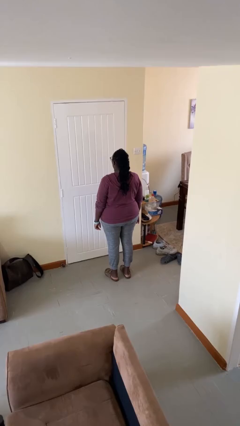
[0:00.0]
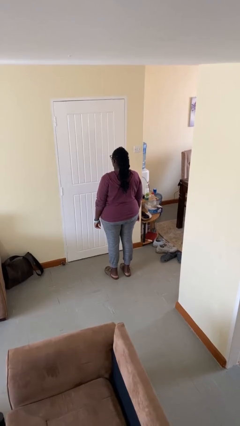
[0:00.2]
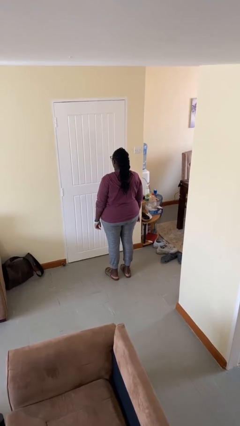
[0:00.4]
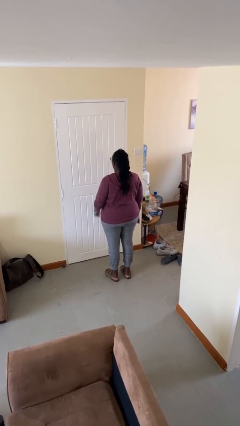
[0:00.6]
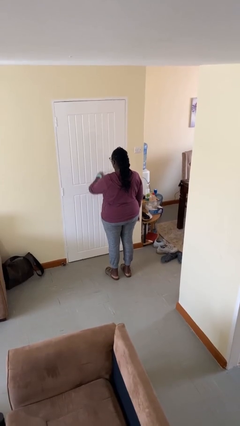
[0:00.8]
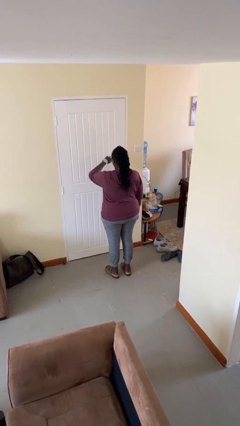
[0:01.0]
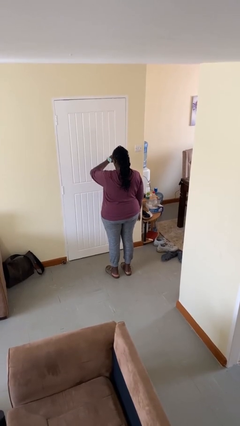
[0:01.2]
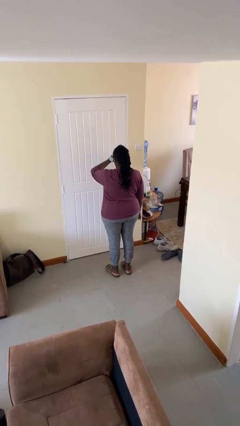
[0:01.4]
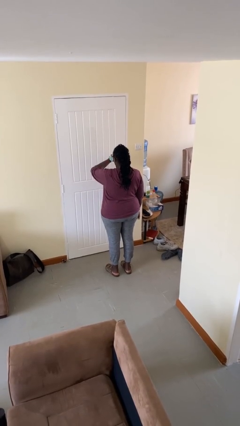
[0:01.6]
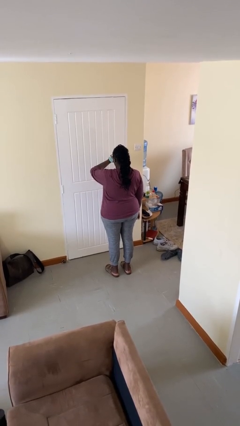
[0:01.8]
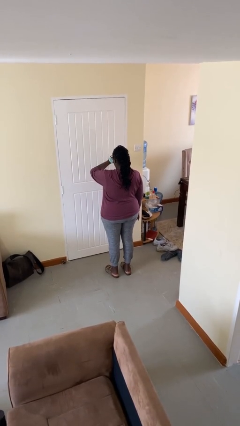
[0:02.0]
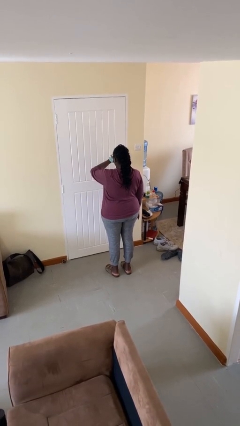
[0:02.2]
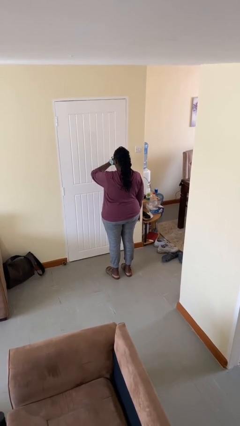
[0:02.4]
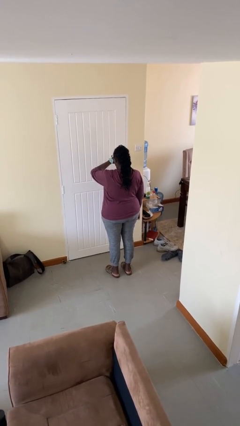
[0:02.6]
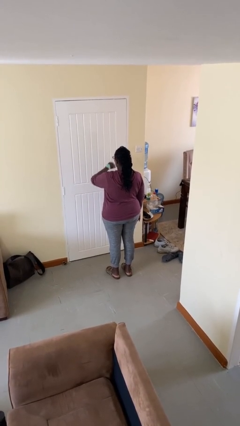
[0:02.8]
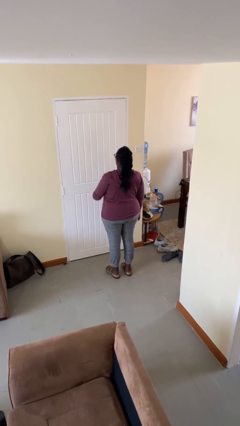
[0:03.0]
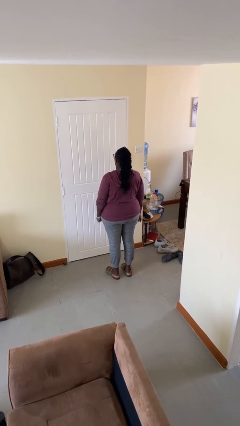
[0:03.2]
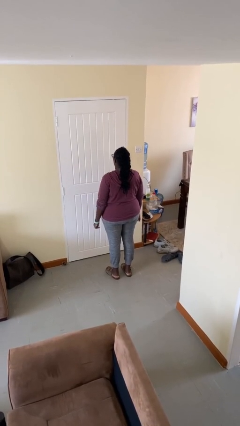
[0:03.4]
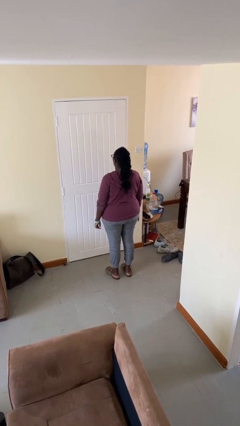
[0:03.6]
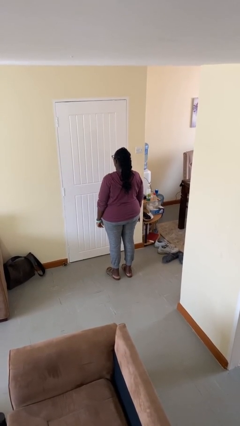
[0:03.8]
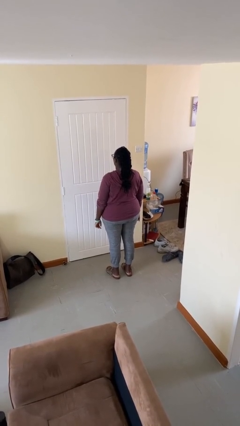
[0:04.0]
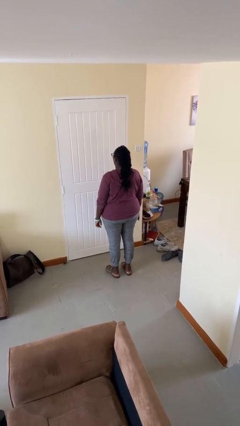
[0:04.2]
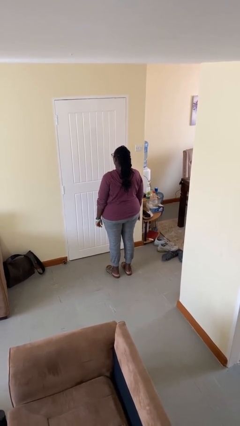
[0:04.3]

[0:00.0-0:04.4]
person looks at wristwatch

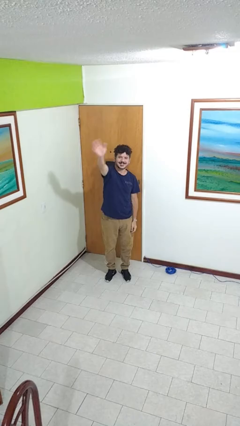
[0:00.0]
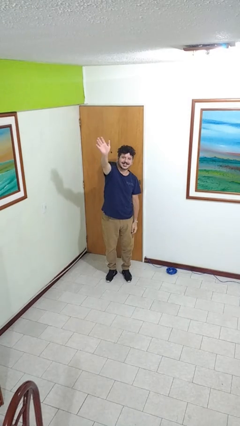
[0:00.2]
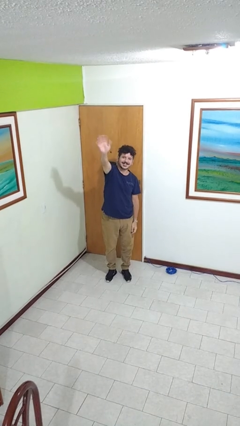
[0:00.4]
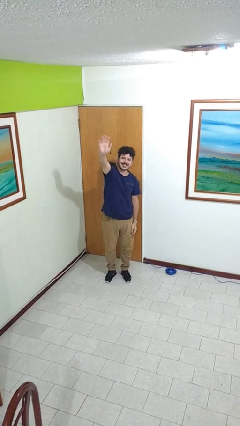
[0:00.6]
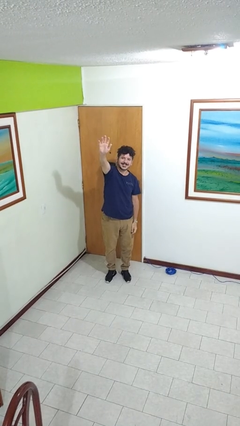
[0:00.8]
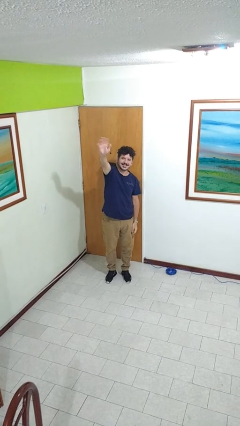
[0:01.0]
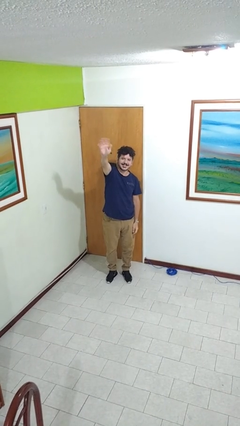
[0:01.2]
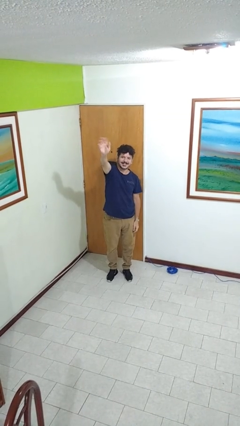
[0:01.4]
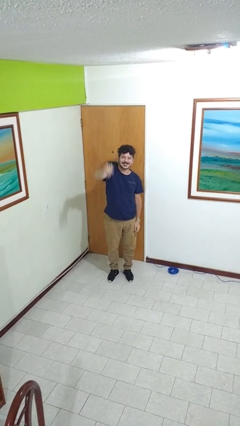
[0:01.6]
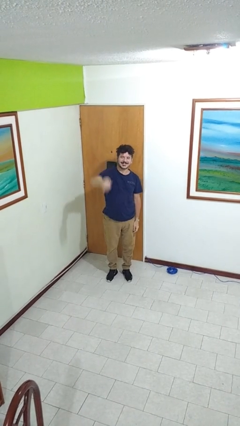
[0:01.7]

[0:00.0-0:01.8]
person waves at person

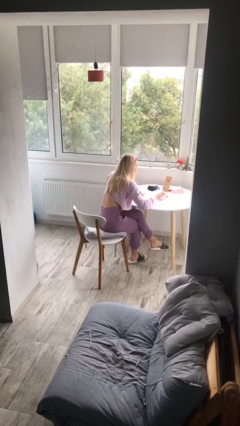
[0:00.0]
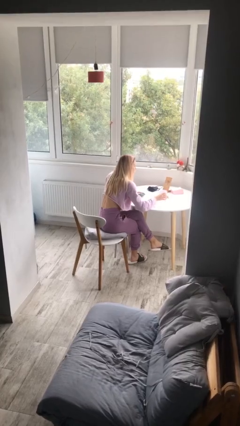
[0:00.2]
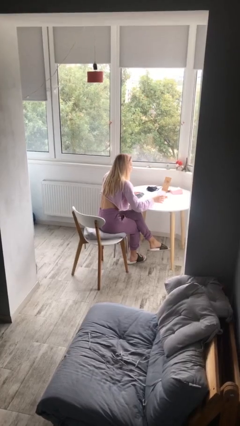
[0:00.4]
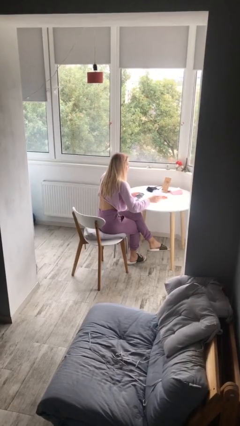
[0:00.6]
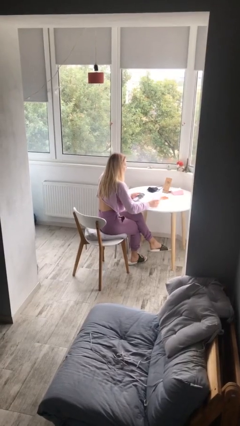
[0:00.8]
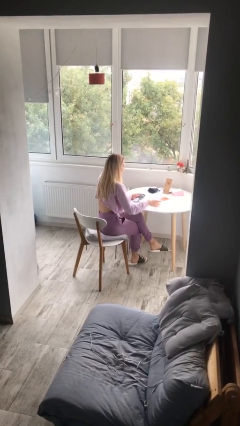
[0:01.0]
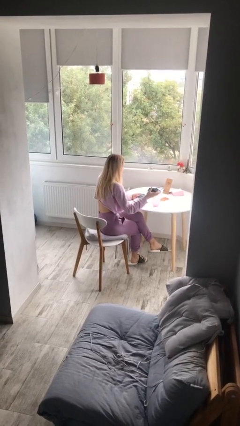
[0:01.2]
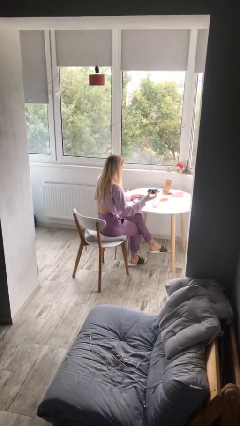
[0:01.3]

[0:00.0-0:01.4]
person sets upright glass

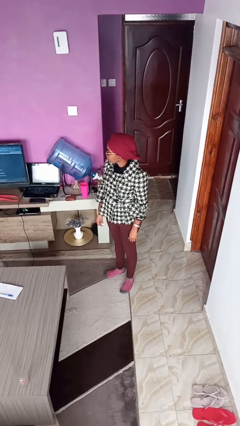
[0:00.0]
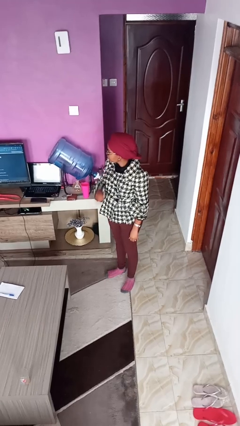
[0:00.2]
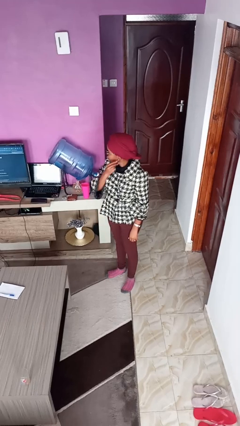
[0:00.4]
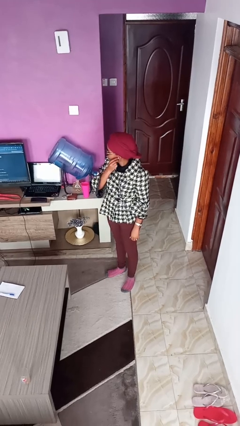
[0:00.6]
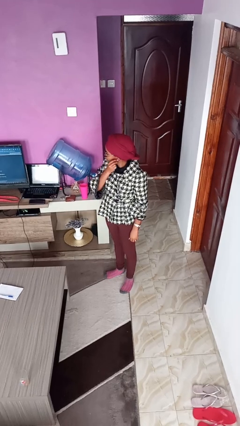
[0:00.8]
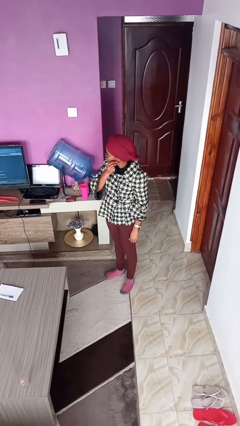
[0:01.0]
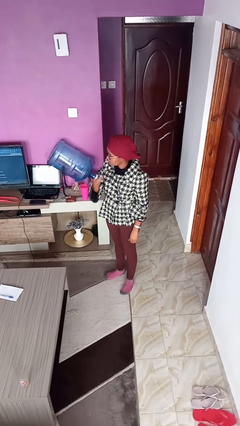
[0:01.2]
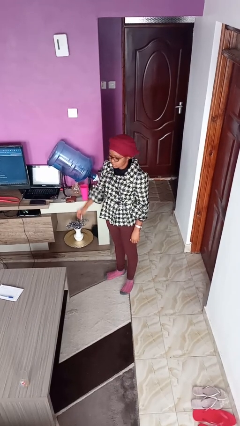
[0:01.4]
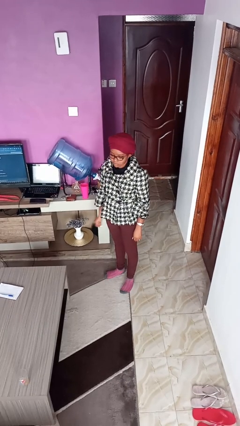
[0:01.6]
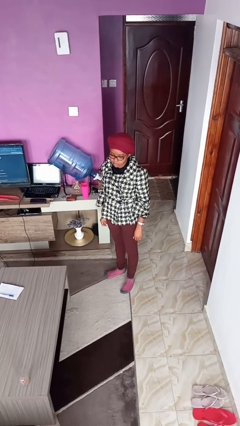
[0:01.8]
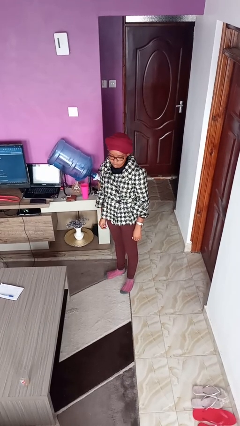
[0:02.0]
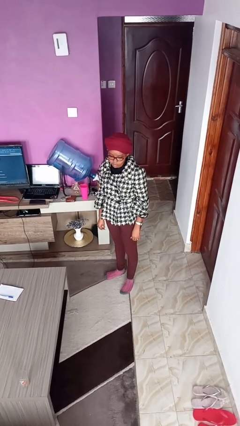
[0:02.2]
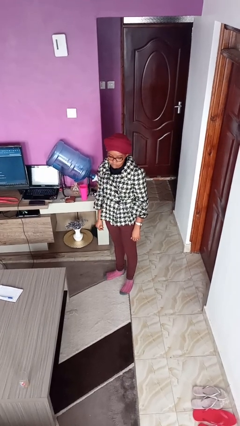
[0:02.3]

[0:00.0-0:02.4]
person takes off earrings

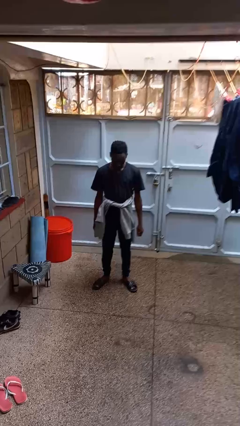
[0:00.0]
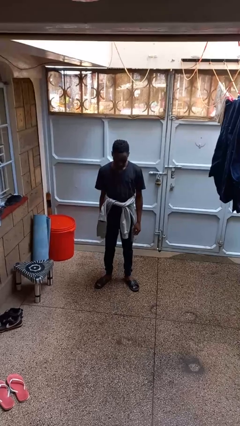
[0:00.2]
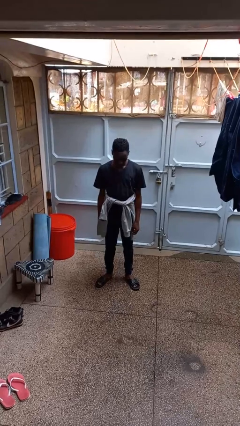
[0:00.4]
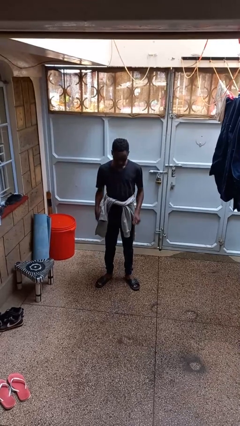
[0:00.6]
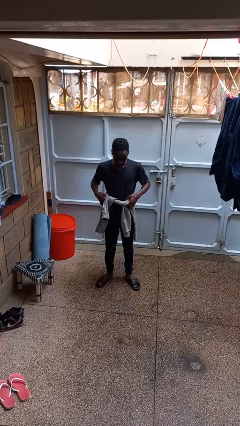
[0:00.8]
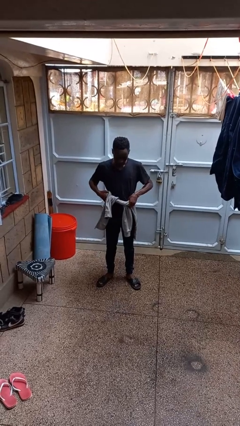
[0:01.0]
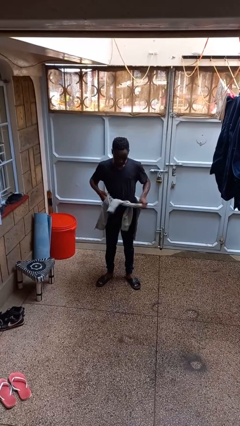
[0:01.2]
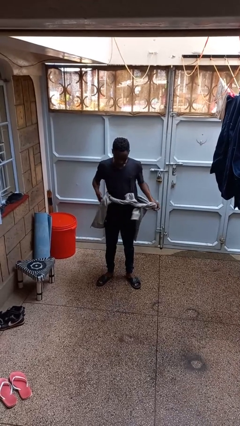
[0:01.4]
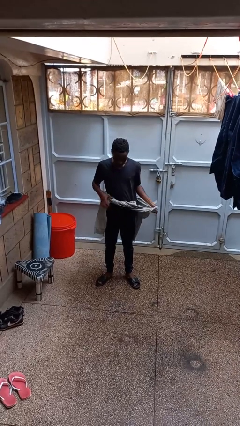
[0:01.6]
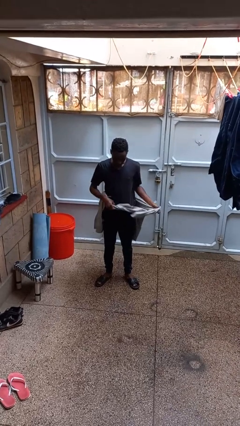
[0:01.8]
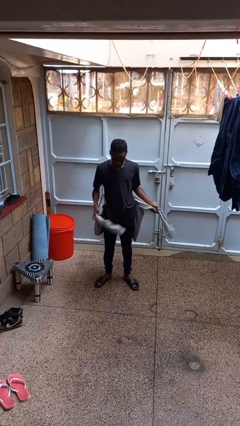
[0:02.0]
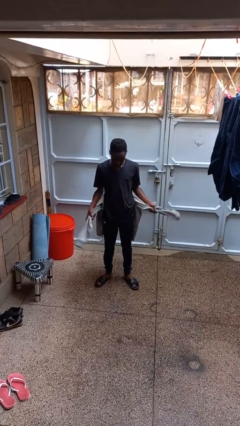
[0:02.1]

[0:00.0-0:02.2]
person unties jacket around waist

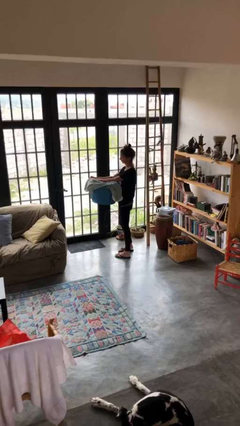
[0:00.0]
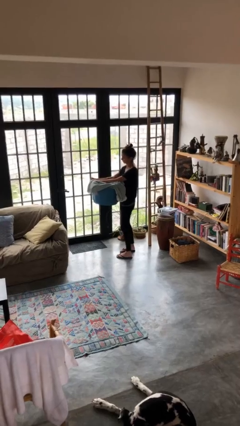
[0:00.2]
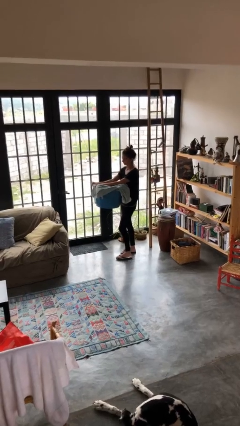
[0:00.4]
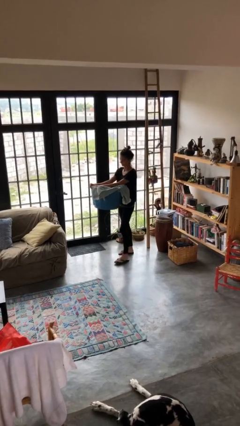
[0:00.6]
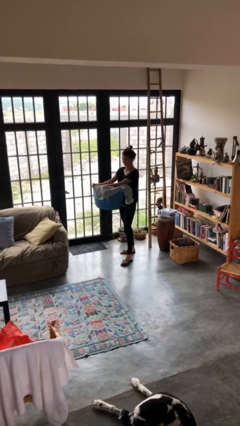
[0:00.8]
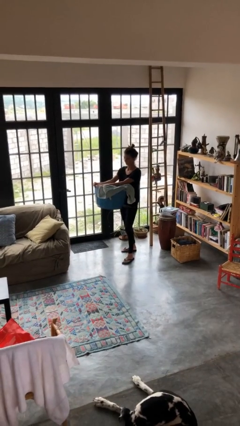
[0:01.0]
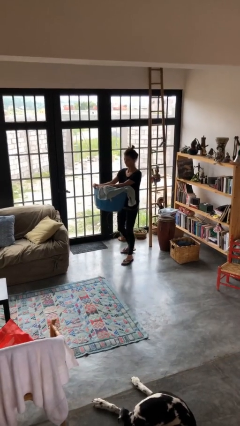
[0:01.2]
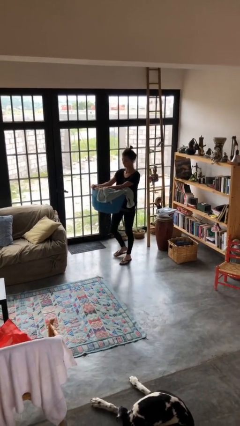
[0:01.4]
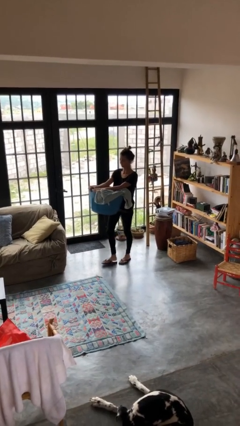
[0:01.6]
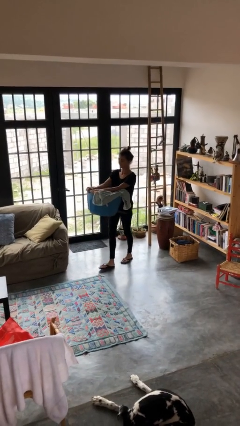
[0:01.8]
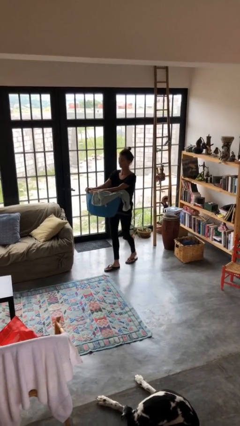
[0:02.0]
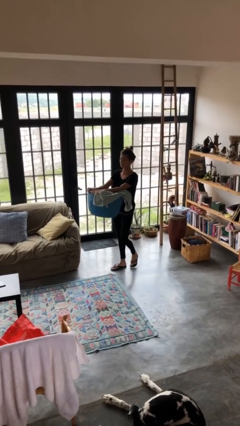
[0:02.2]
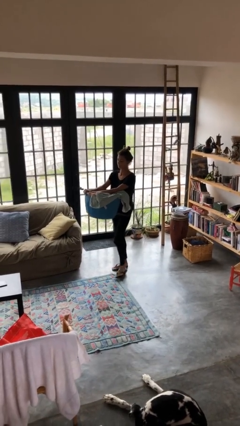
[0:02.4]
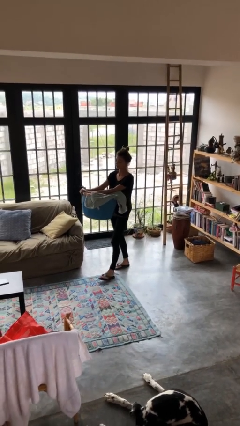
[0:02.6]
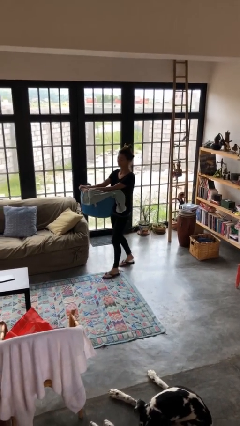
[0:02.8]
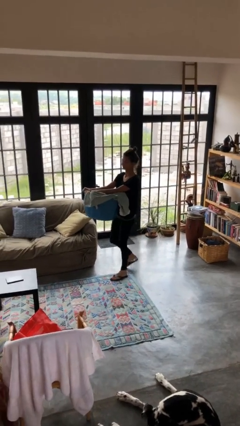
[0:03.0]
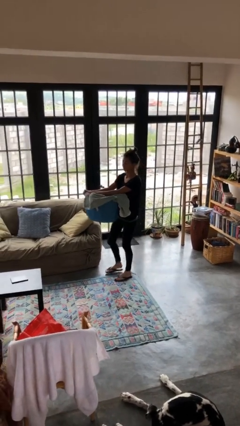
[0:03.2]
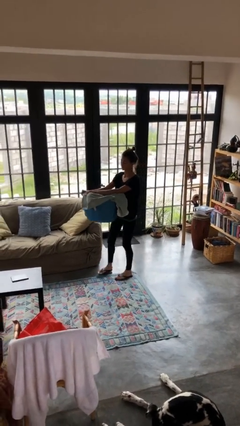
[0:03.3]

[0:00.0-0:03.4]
person carries laundry basket

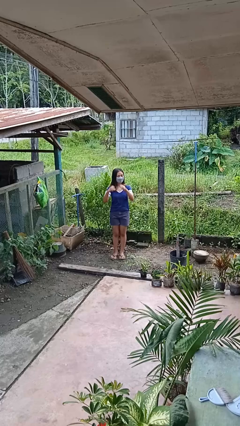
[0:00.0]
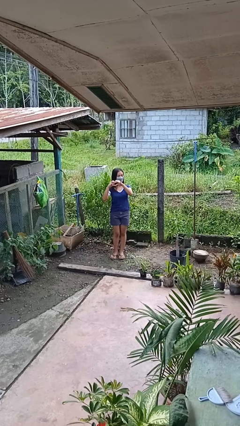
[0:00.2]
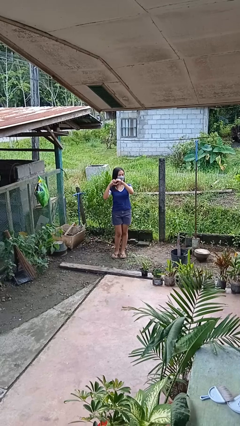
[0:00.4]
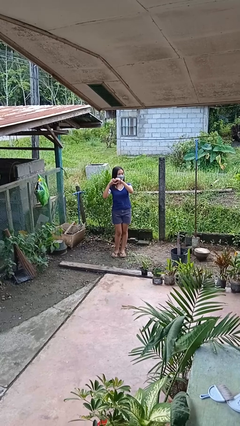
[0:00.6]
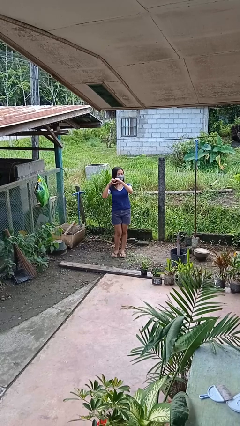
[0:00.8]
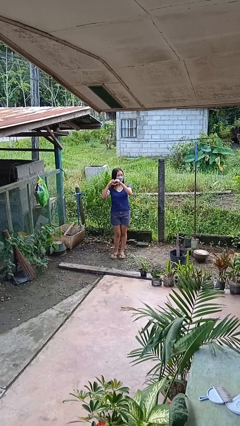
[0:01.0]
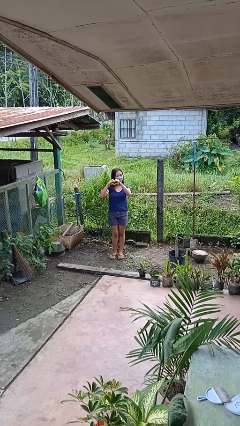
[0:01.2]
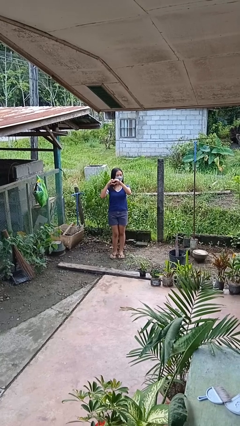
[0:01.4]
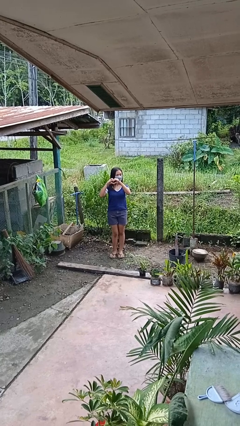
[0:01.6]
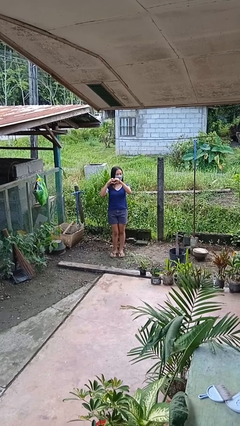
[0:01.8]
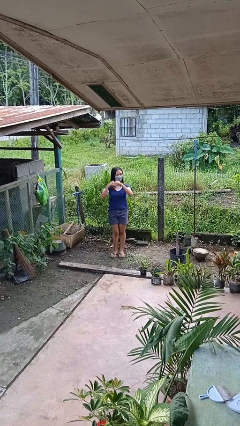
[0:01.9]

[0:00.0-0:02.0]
person gestures heart
